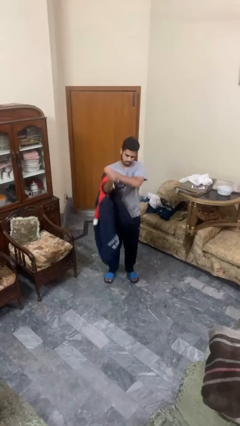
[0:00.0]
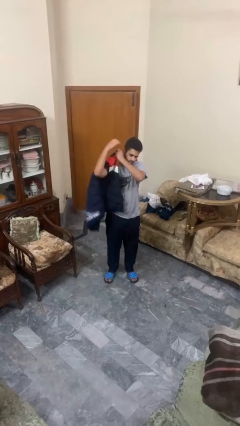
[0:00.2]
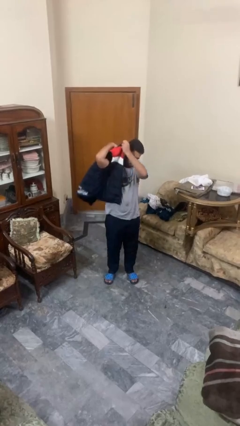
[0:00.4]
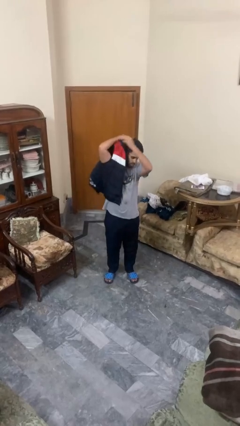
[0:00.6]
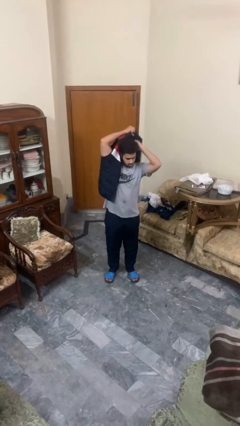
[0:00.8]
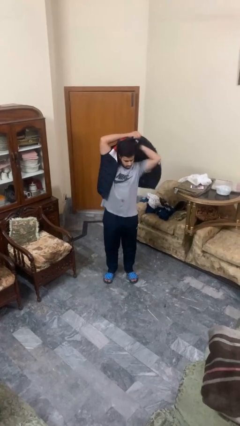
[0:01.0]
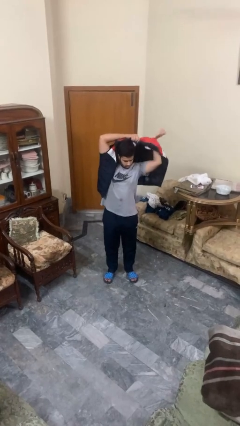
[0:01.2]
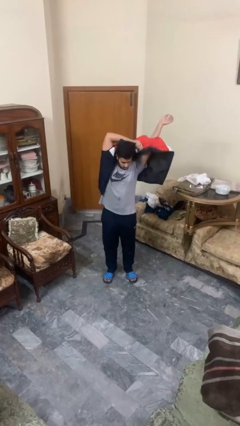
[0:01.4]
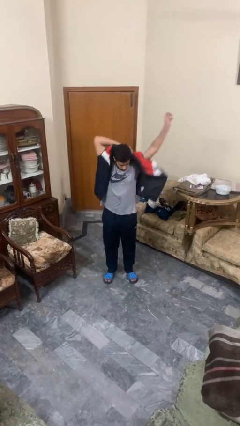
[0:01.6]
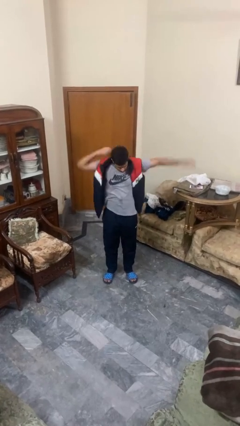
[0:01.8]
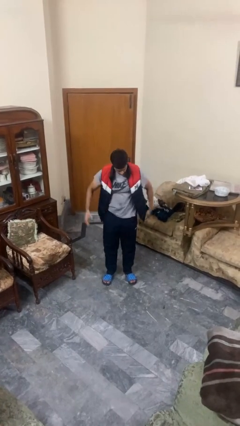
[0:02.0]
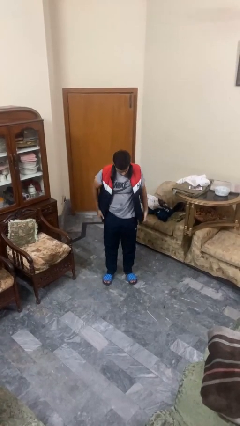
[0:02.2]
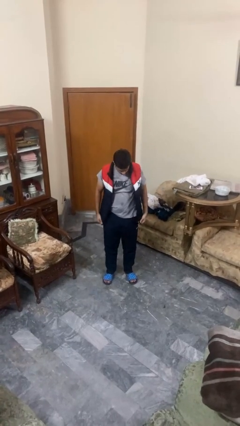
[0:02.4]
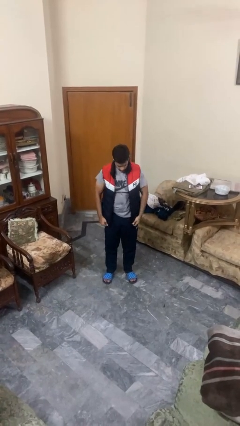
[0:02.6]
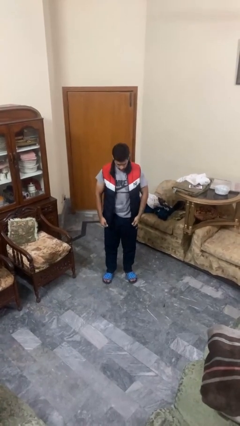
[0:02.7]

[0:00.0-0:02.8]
person puts on jacket

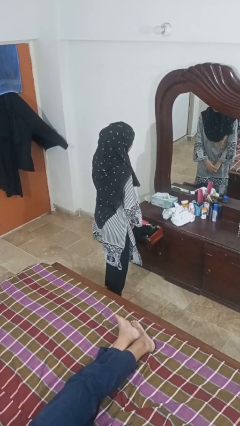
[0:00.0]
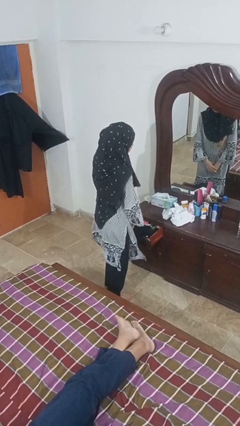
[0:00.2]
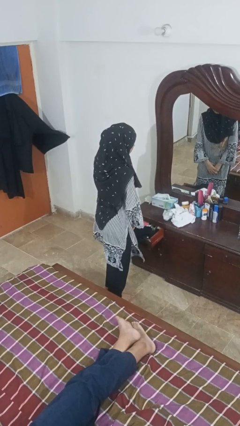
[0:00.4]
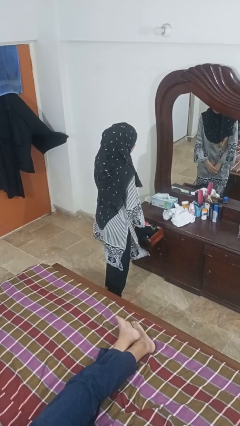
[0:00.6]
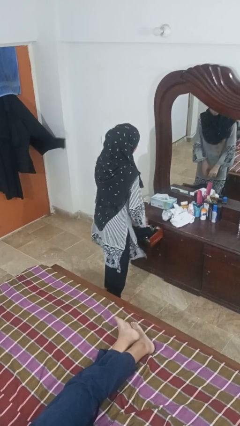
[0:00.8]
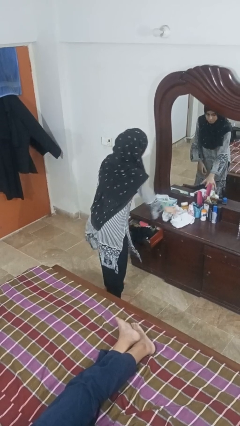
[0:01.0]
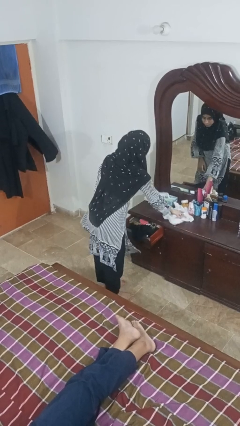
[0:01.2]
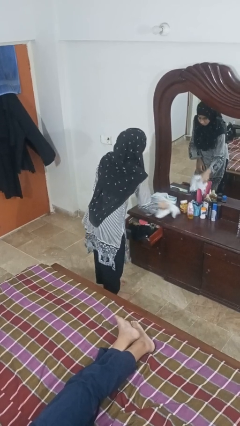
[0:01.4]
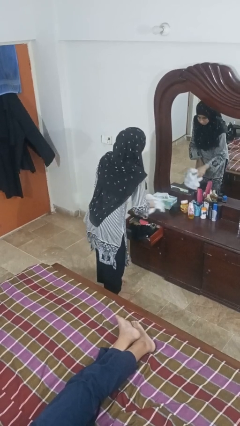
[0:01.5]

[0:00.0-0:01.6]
person puts clothes into dresser

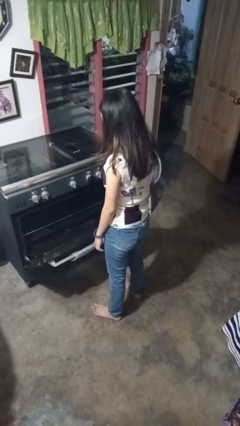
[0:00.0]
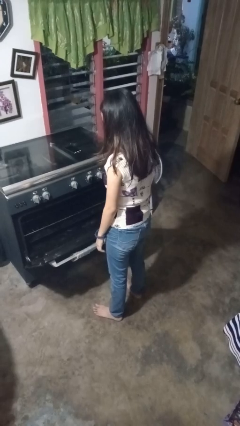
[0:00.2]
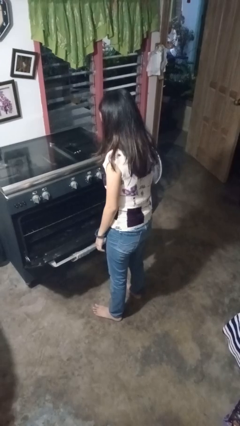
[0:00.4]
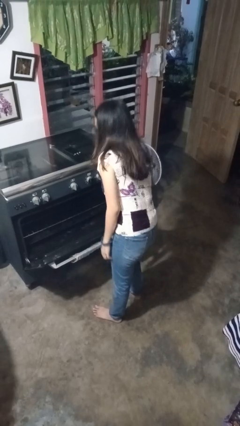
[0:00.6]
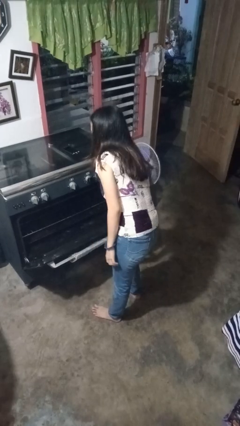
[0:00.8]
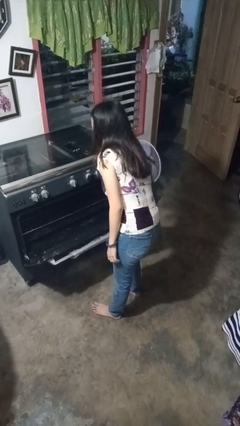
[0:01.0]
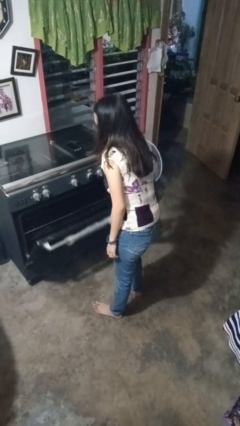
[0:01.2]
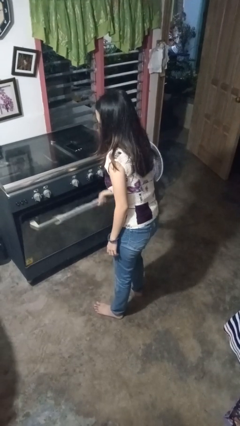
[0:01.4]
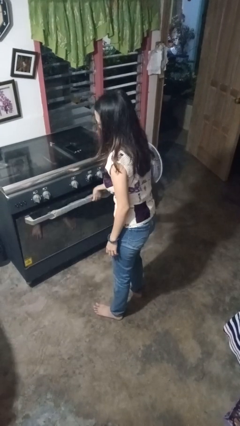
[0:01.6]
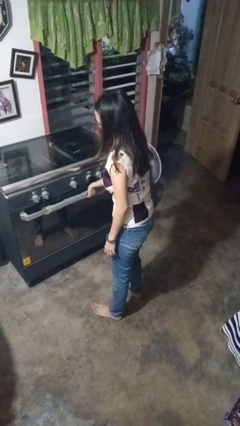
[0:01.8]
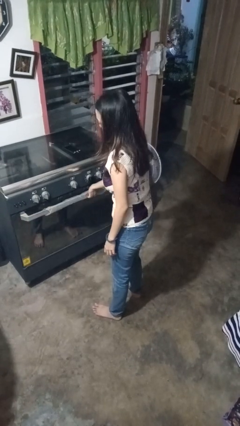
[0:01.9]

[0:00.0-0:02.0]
person closes oven door

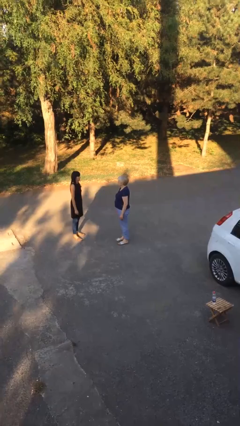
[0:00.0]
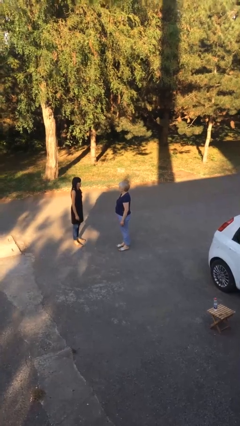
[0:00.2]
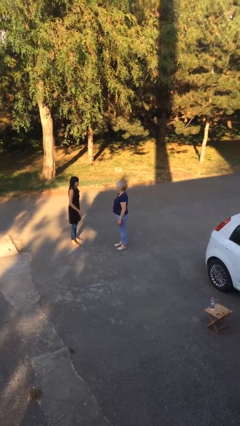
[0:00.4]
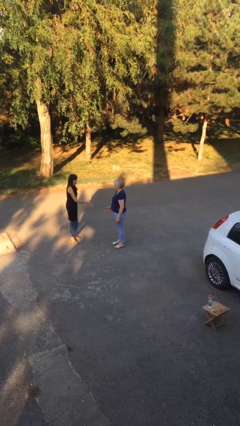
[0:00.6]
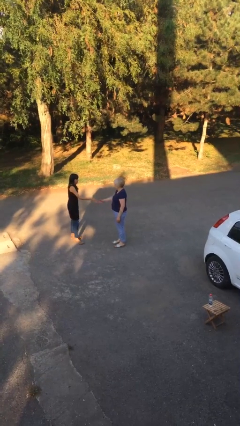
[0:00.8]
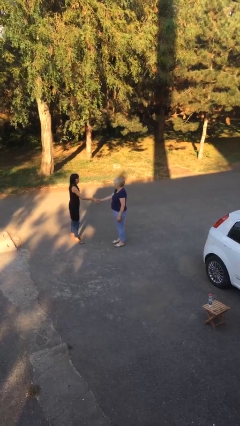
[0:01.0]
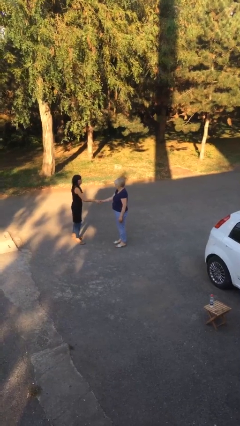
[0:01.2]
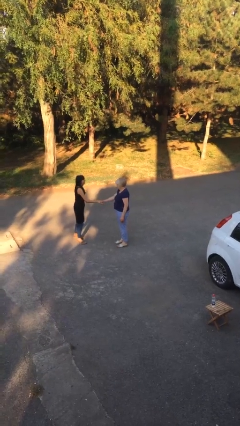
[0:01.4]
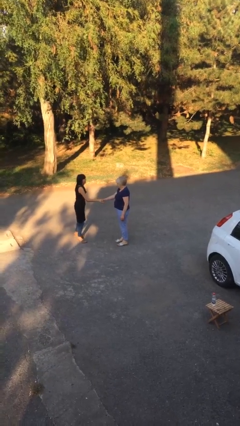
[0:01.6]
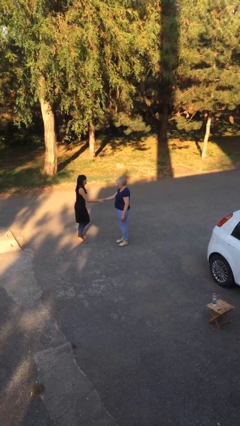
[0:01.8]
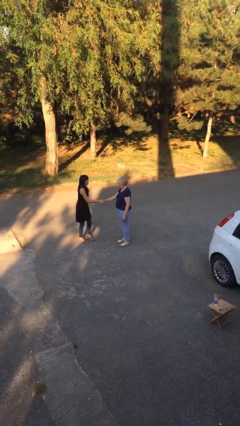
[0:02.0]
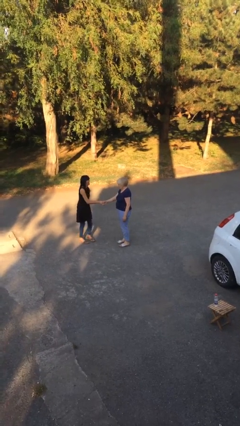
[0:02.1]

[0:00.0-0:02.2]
person shakes hand

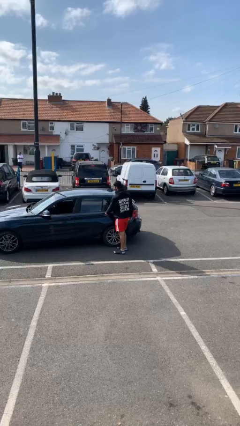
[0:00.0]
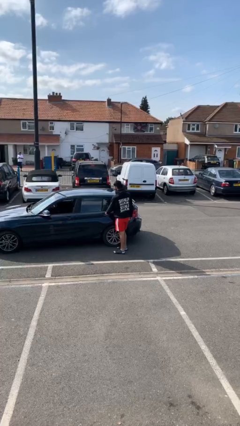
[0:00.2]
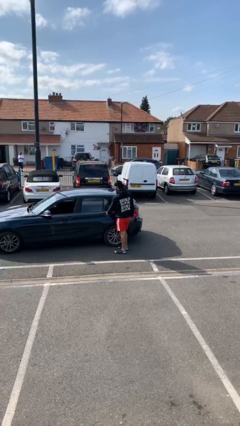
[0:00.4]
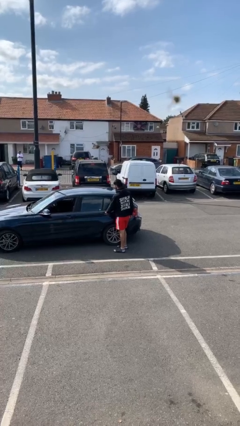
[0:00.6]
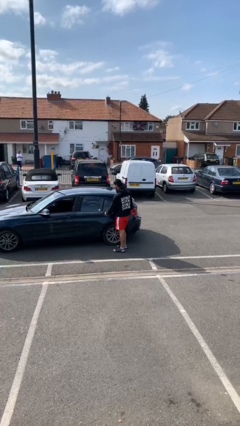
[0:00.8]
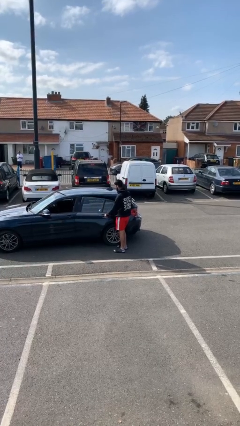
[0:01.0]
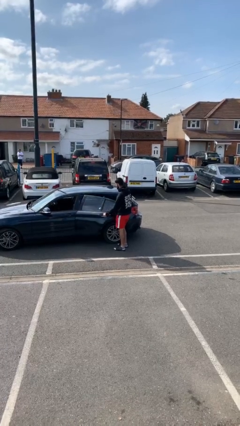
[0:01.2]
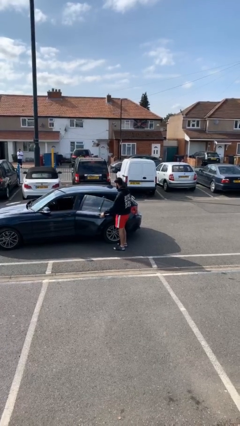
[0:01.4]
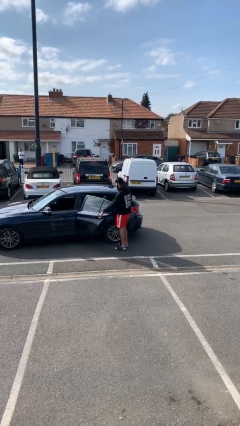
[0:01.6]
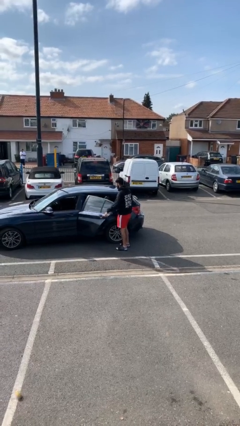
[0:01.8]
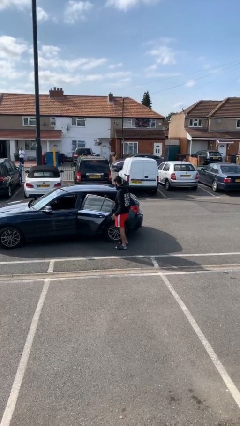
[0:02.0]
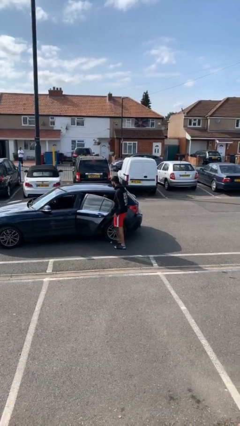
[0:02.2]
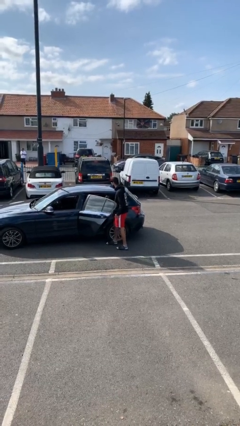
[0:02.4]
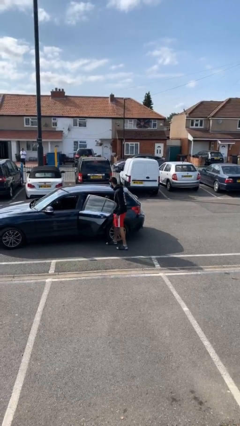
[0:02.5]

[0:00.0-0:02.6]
person opens car door

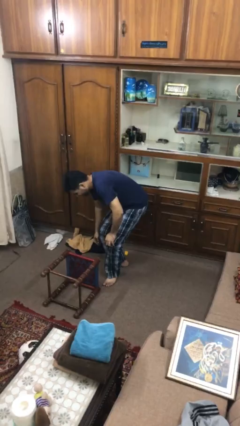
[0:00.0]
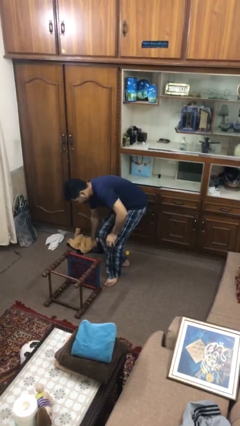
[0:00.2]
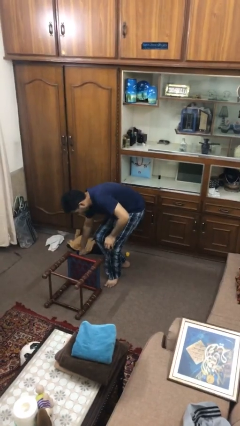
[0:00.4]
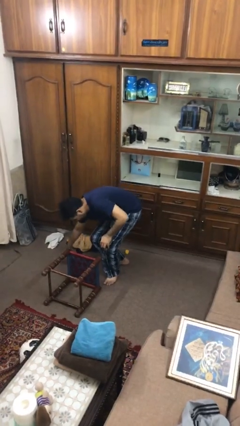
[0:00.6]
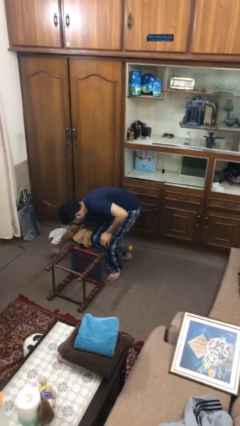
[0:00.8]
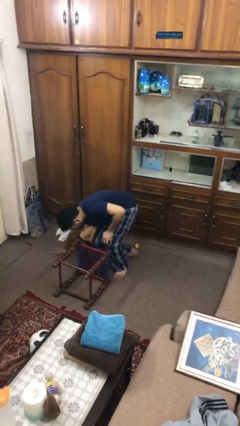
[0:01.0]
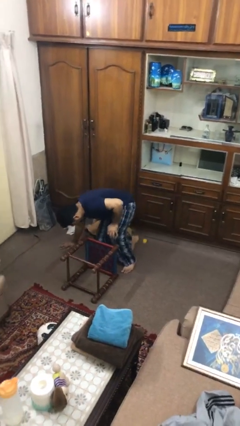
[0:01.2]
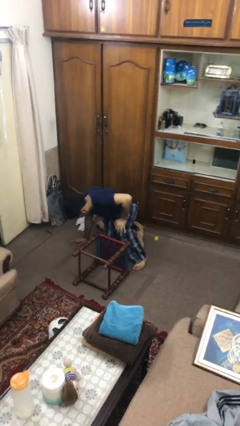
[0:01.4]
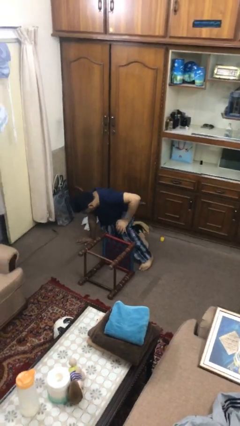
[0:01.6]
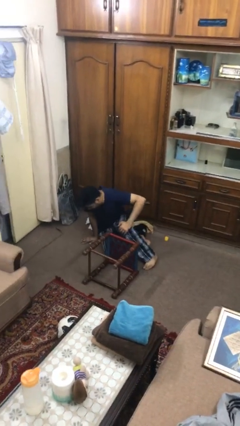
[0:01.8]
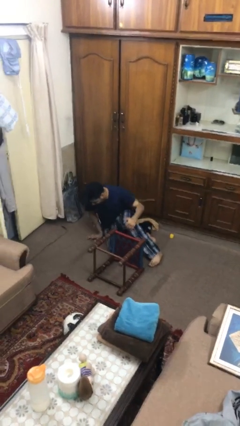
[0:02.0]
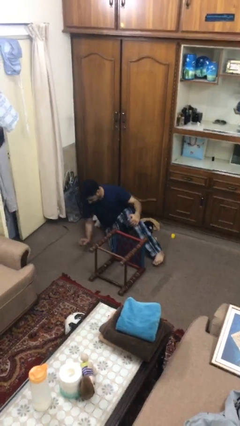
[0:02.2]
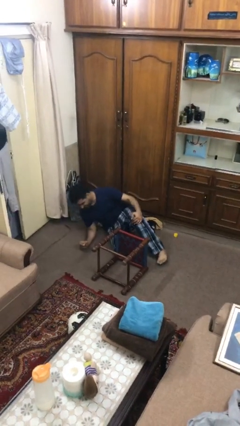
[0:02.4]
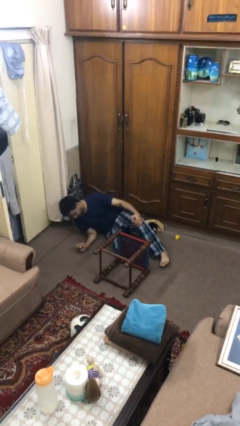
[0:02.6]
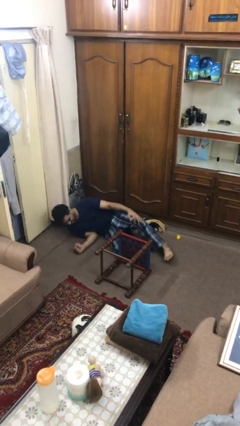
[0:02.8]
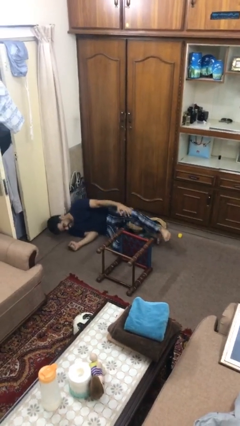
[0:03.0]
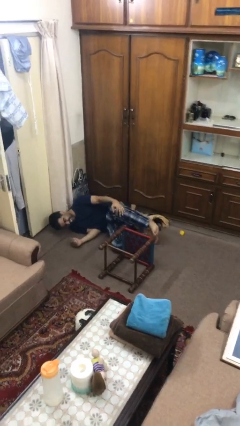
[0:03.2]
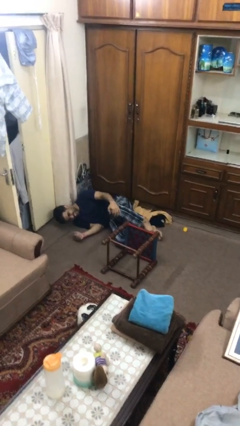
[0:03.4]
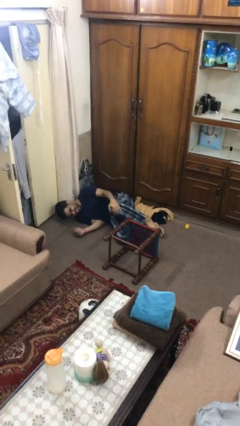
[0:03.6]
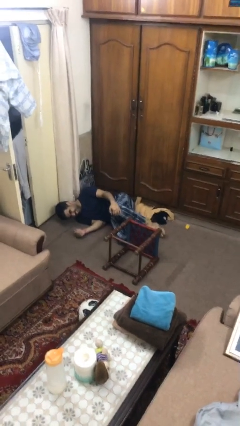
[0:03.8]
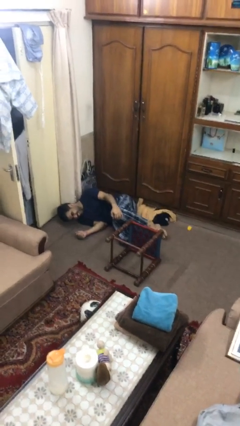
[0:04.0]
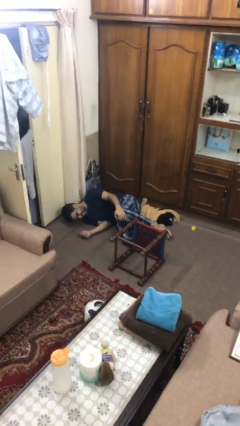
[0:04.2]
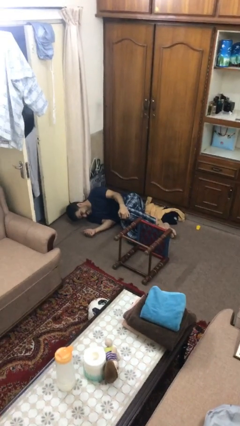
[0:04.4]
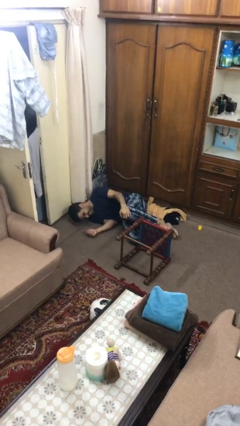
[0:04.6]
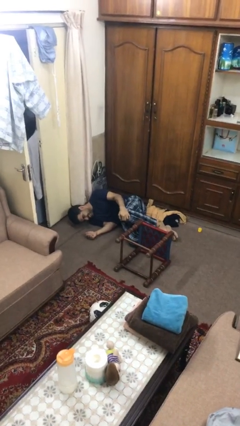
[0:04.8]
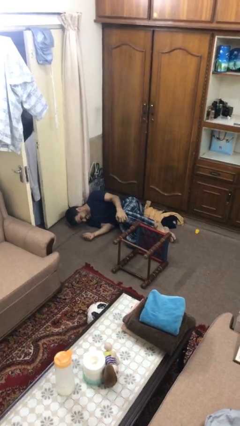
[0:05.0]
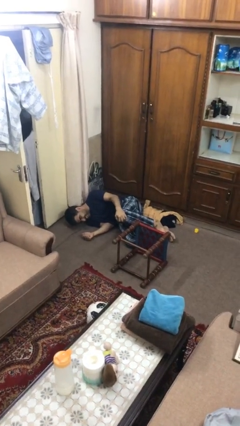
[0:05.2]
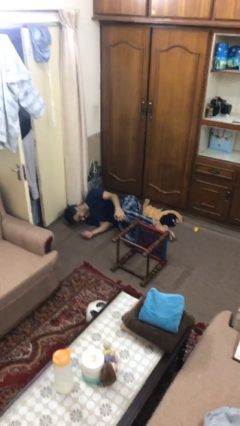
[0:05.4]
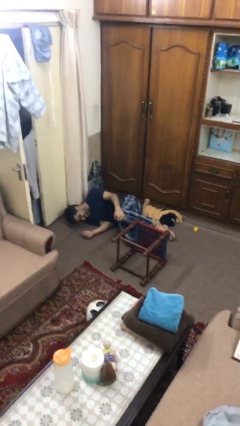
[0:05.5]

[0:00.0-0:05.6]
person lies down on floor

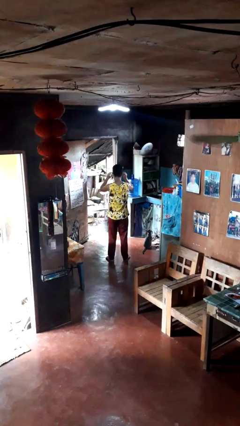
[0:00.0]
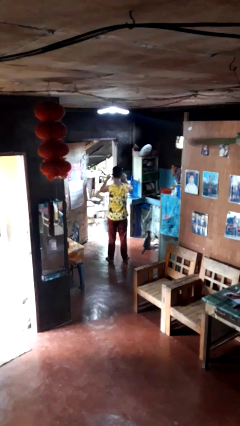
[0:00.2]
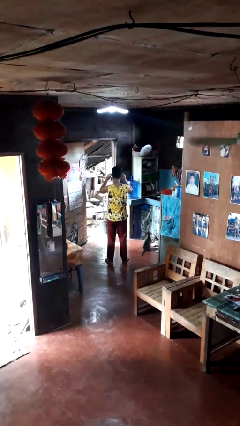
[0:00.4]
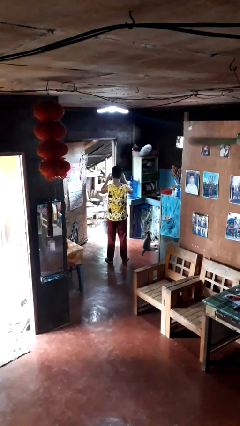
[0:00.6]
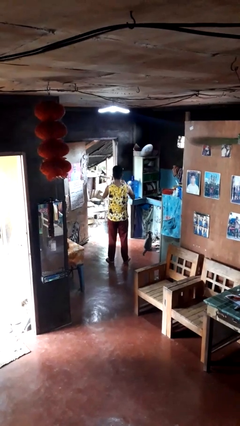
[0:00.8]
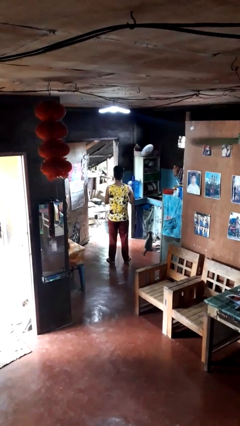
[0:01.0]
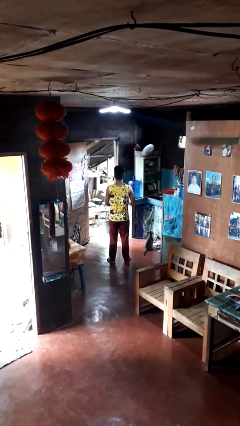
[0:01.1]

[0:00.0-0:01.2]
person takes off glasses
